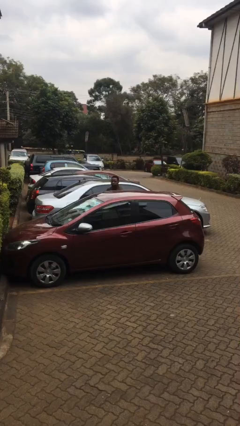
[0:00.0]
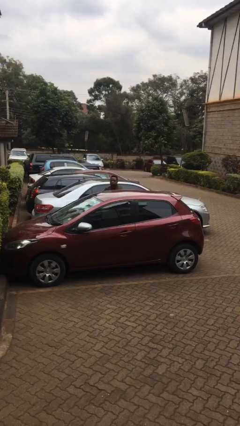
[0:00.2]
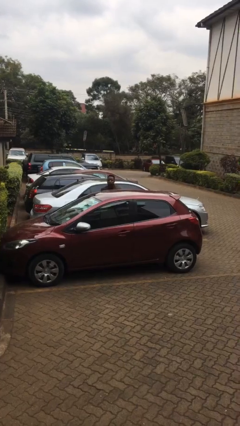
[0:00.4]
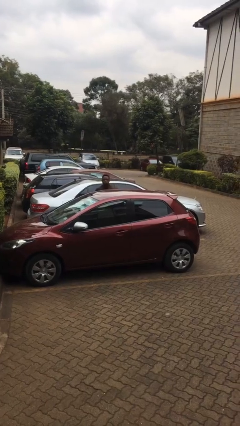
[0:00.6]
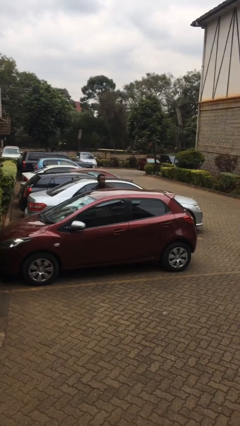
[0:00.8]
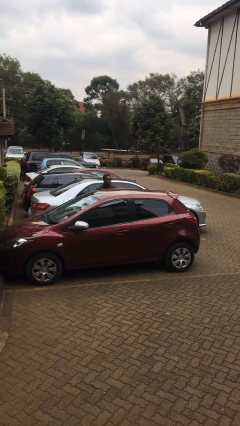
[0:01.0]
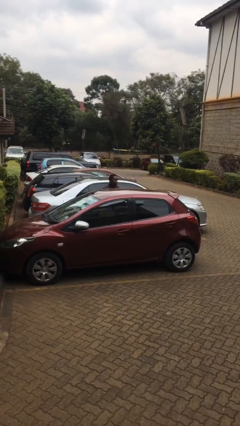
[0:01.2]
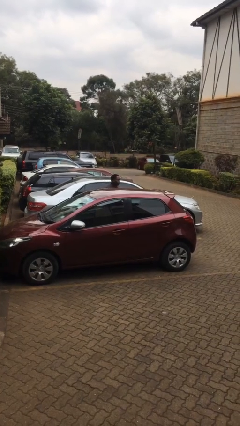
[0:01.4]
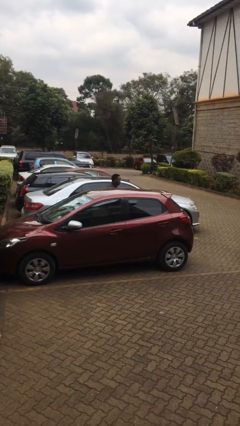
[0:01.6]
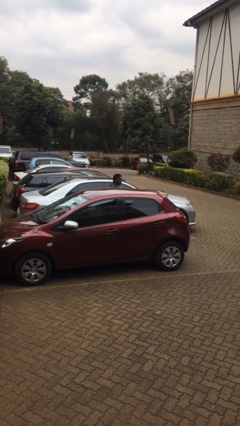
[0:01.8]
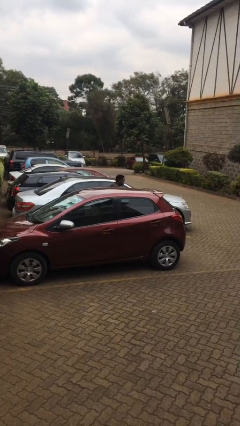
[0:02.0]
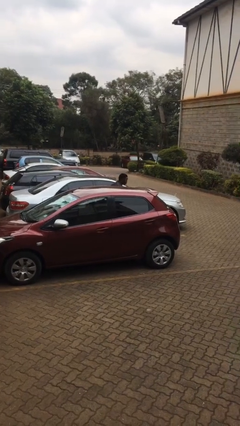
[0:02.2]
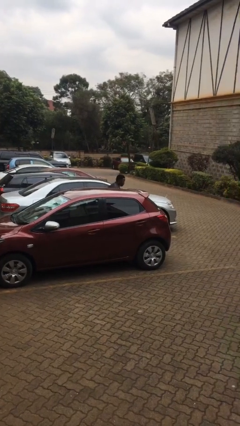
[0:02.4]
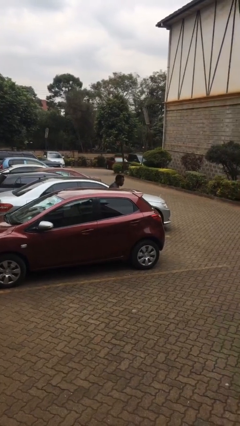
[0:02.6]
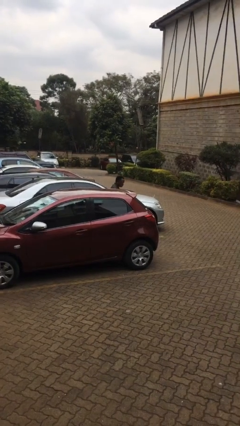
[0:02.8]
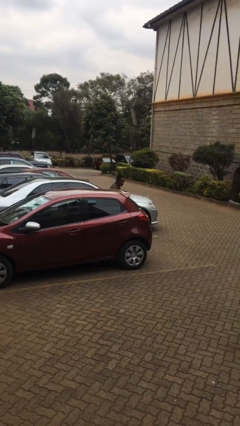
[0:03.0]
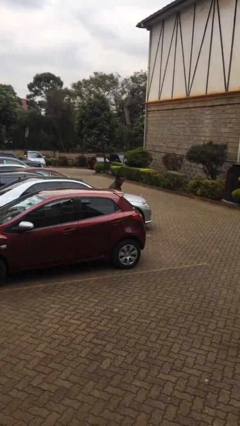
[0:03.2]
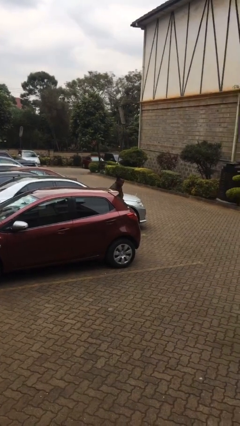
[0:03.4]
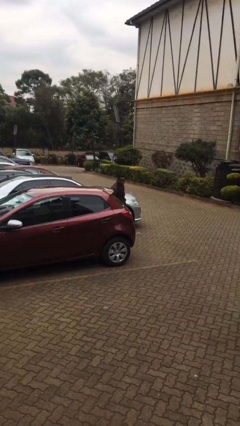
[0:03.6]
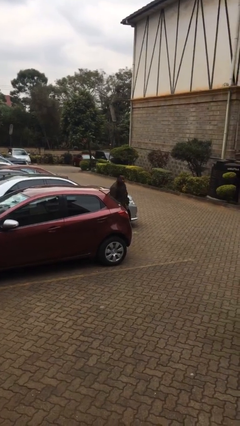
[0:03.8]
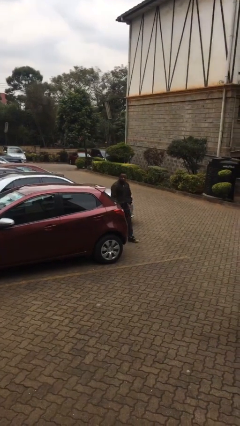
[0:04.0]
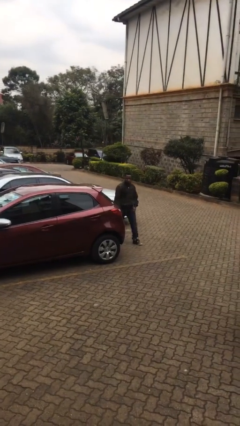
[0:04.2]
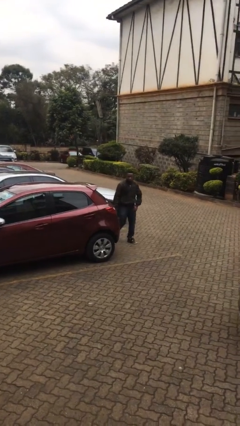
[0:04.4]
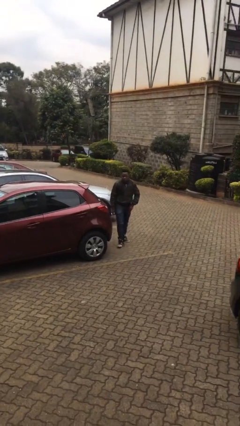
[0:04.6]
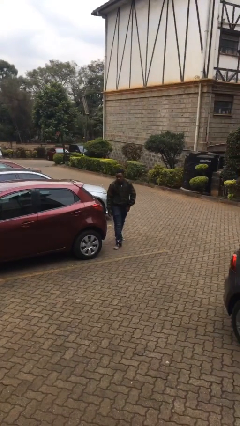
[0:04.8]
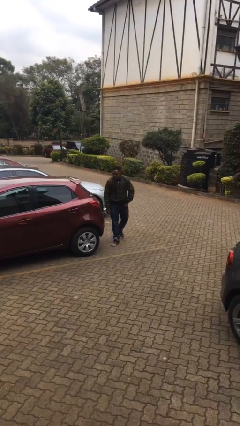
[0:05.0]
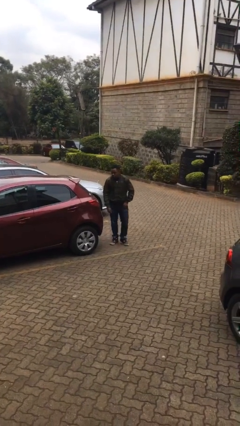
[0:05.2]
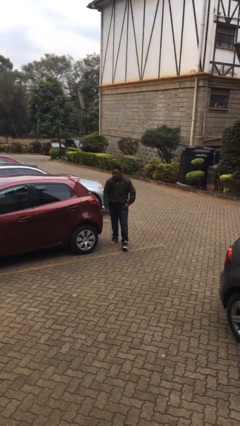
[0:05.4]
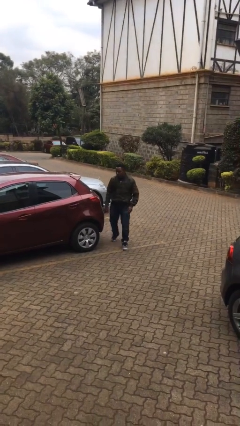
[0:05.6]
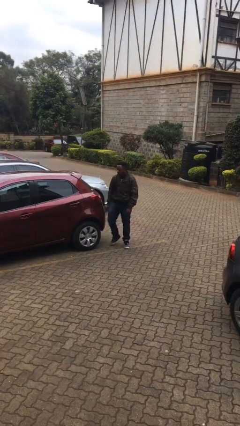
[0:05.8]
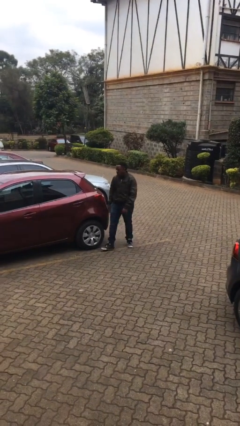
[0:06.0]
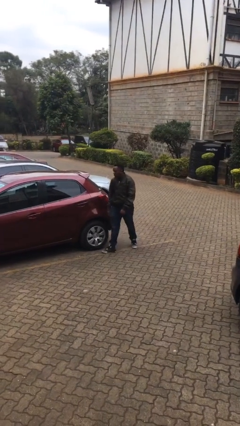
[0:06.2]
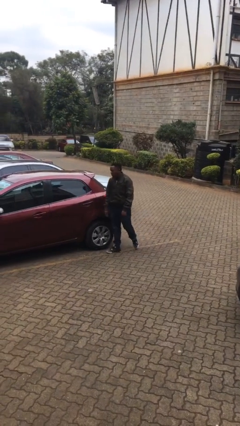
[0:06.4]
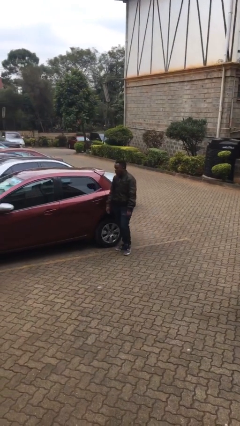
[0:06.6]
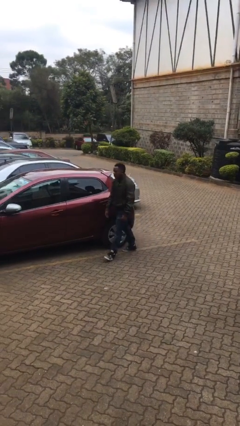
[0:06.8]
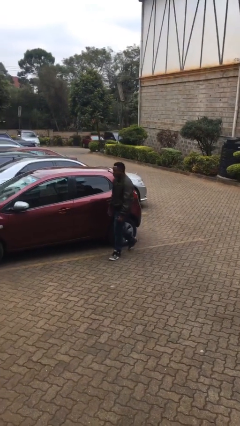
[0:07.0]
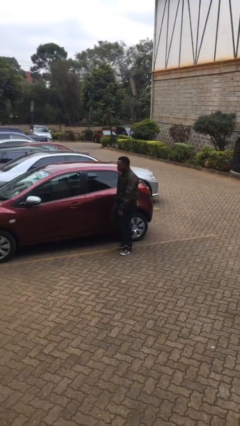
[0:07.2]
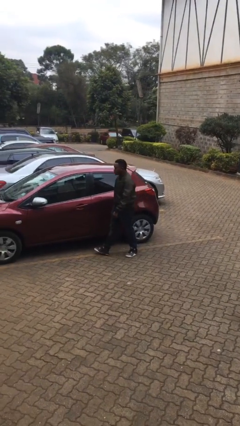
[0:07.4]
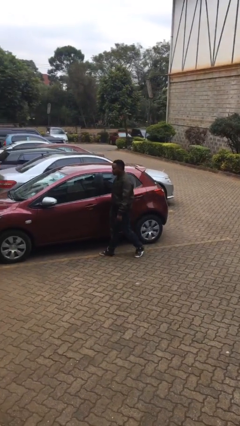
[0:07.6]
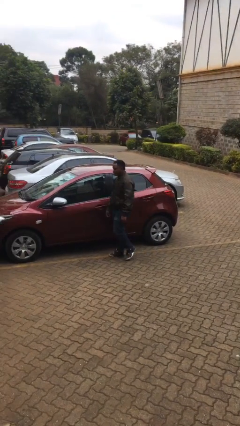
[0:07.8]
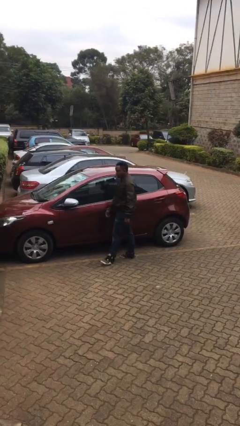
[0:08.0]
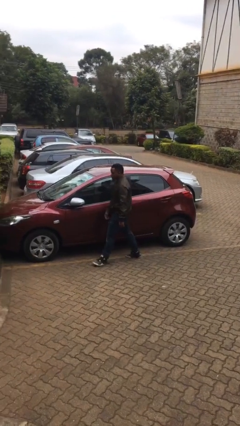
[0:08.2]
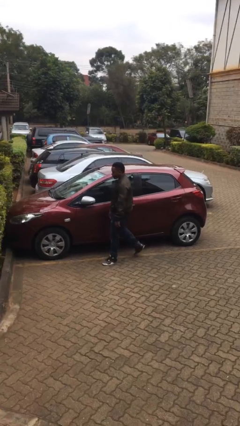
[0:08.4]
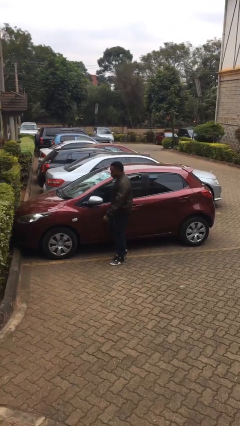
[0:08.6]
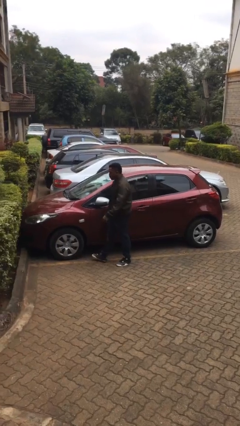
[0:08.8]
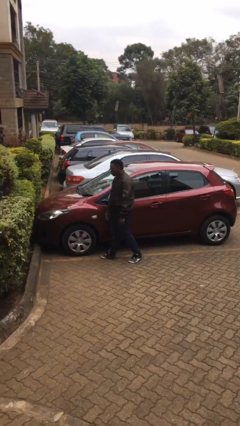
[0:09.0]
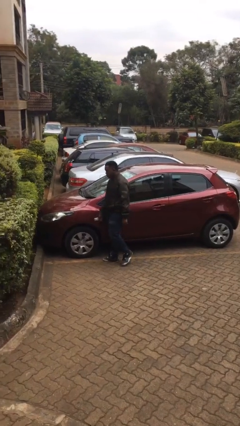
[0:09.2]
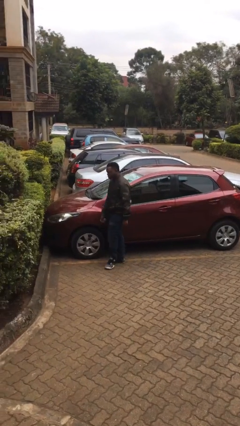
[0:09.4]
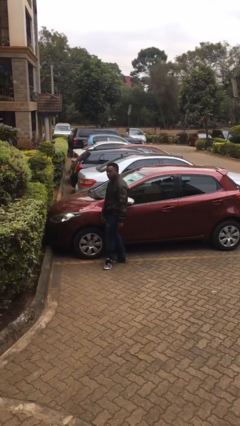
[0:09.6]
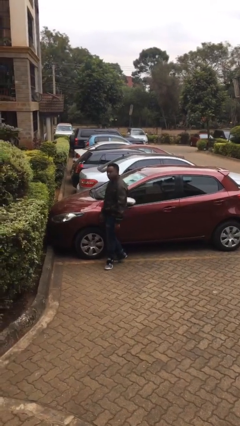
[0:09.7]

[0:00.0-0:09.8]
person walks around car

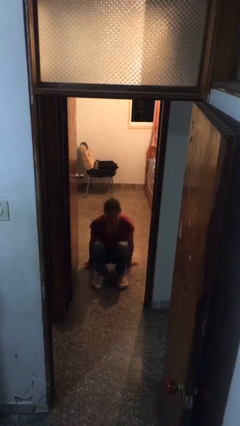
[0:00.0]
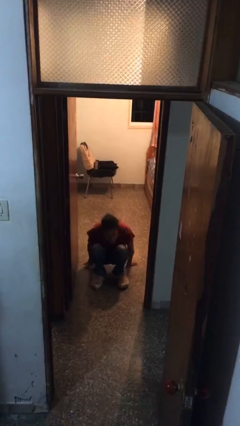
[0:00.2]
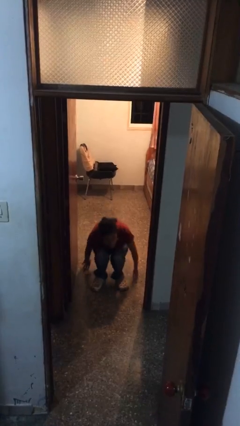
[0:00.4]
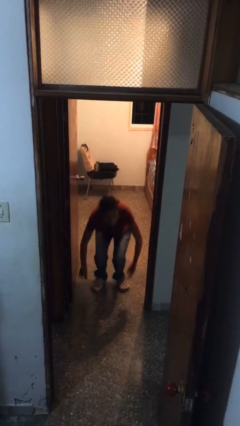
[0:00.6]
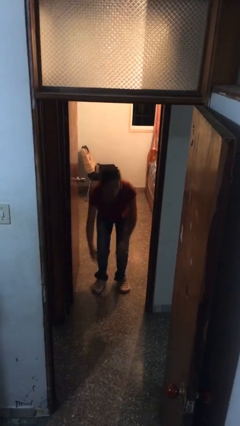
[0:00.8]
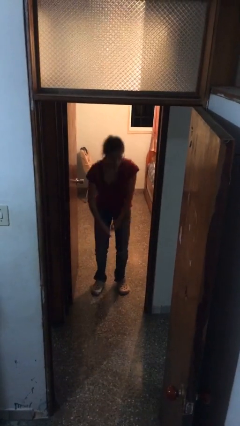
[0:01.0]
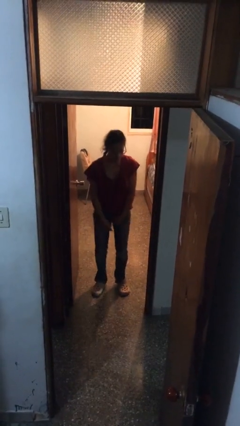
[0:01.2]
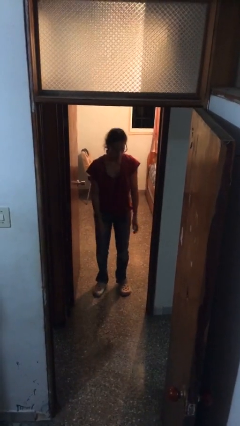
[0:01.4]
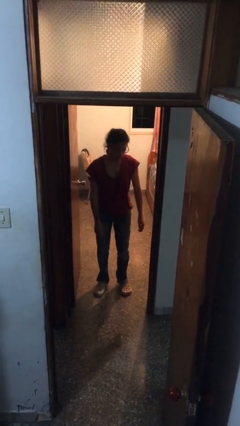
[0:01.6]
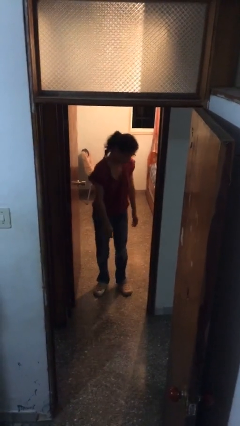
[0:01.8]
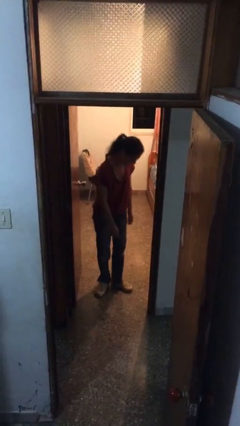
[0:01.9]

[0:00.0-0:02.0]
person stands up

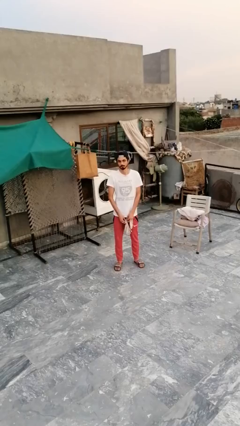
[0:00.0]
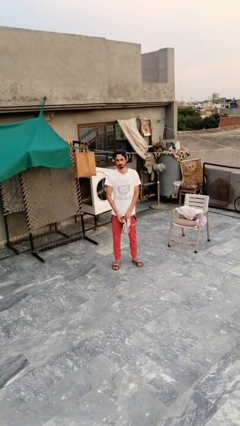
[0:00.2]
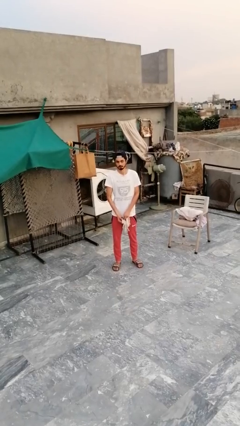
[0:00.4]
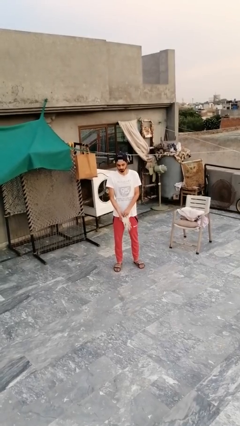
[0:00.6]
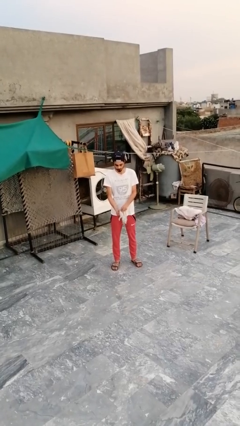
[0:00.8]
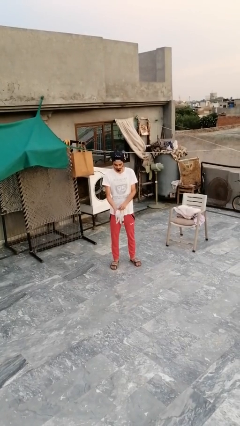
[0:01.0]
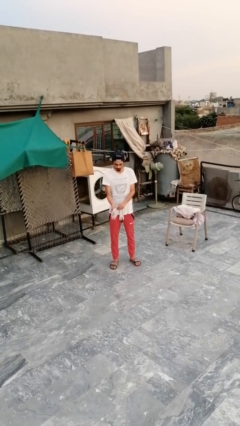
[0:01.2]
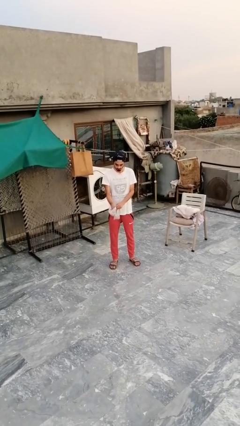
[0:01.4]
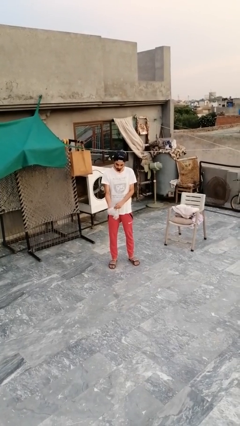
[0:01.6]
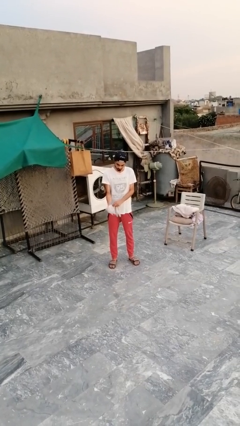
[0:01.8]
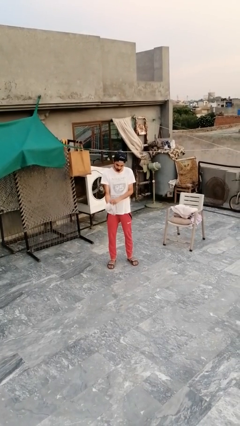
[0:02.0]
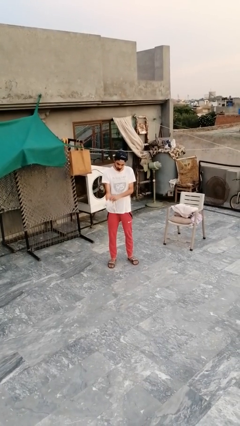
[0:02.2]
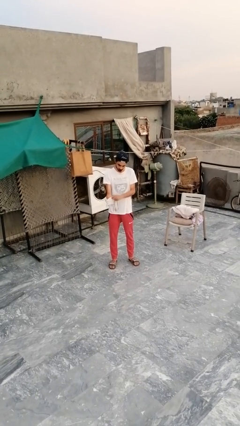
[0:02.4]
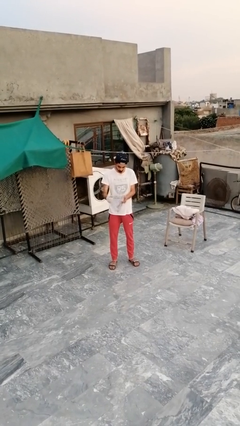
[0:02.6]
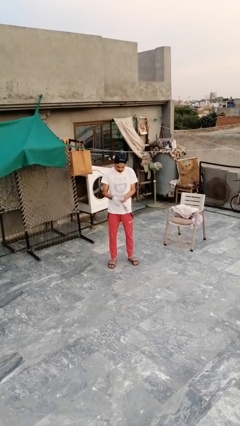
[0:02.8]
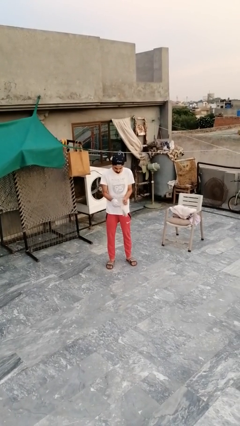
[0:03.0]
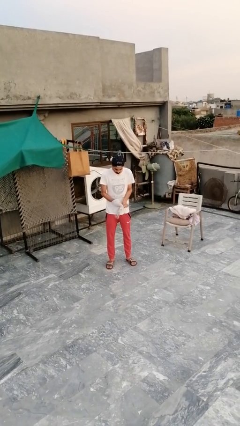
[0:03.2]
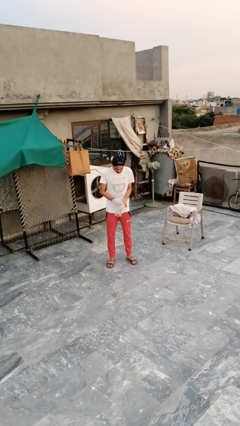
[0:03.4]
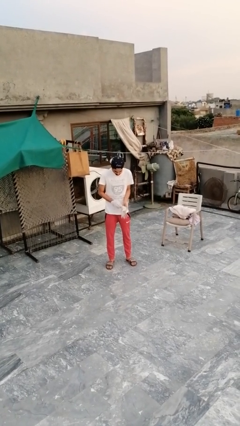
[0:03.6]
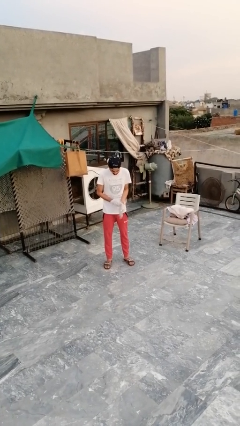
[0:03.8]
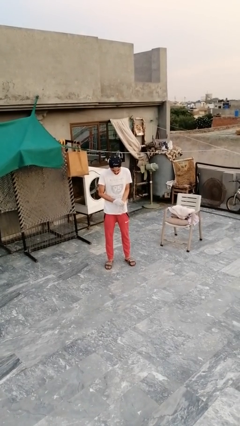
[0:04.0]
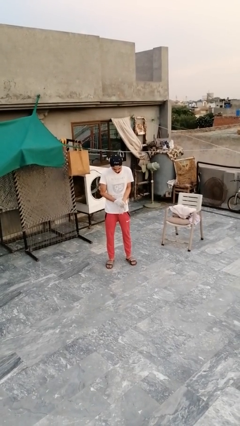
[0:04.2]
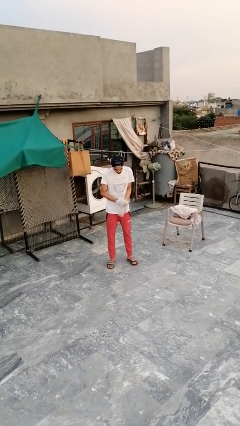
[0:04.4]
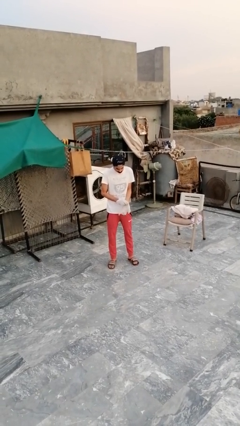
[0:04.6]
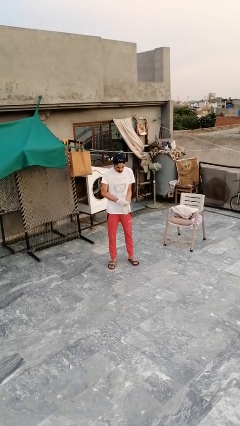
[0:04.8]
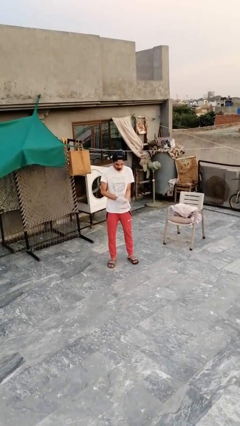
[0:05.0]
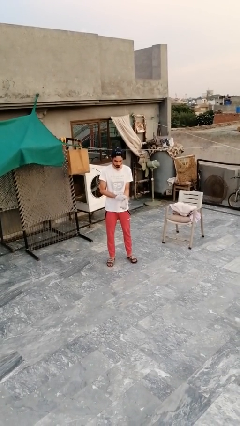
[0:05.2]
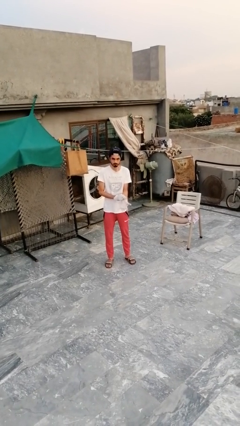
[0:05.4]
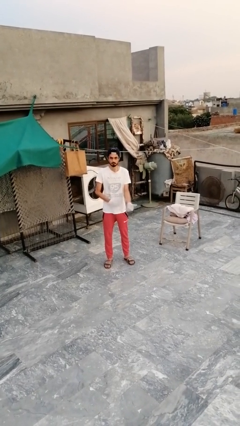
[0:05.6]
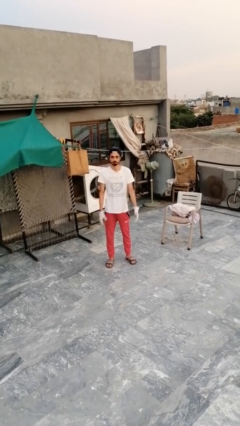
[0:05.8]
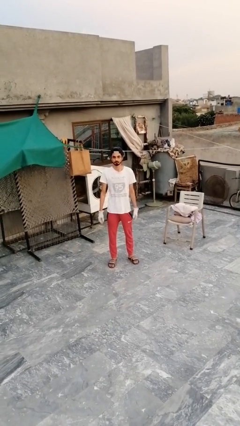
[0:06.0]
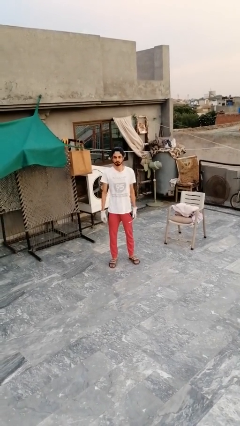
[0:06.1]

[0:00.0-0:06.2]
person puts on gloves
